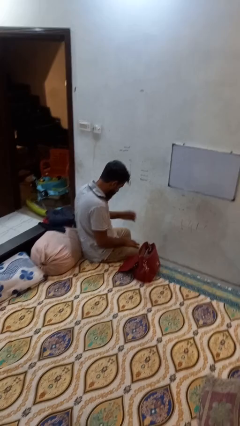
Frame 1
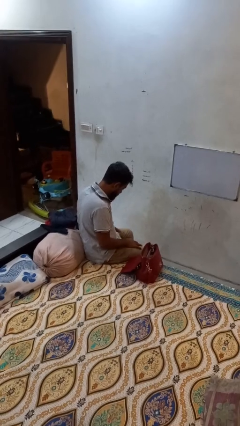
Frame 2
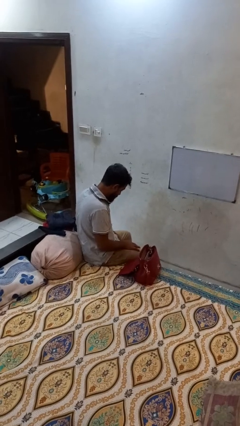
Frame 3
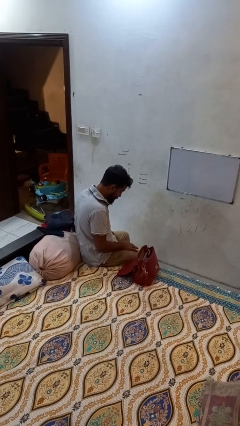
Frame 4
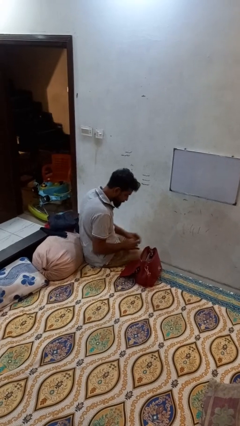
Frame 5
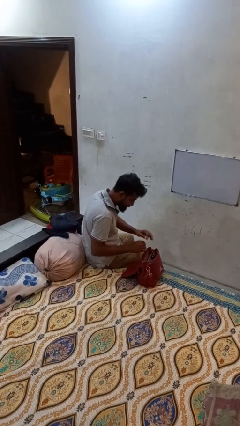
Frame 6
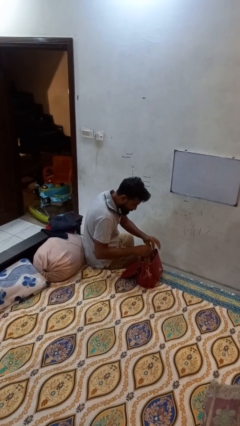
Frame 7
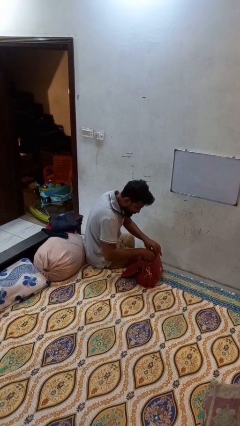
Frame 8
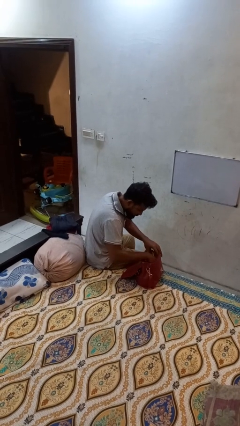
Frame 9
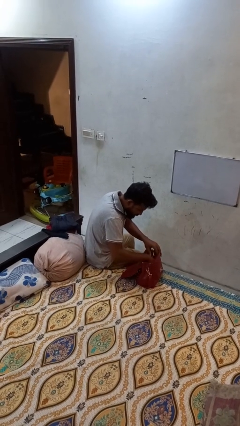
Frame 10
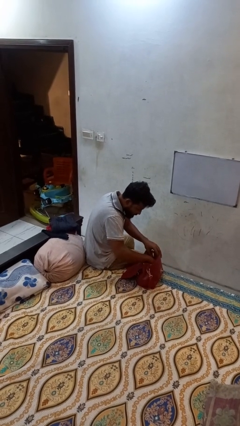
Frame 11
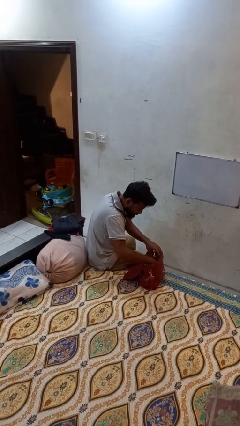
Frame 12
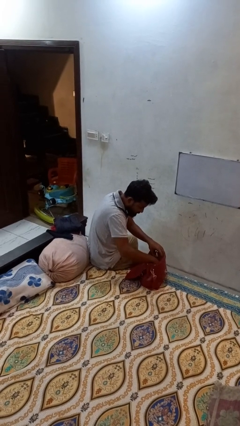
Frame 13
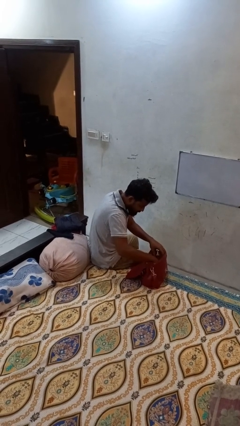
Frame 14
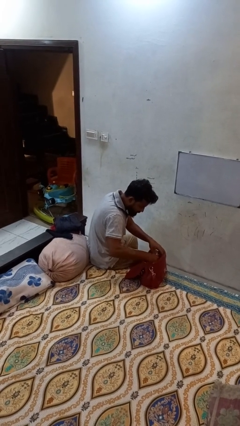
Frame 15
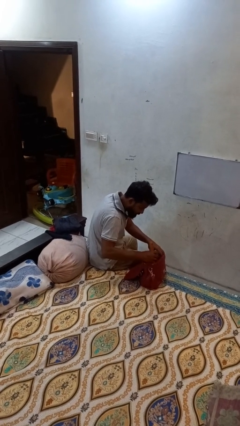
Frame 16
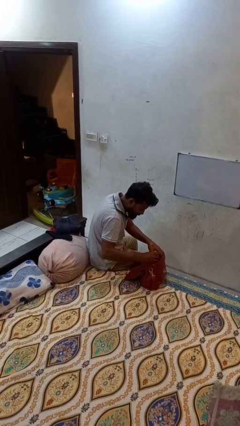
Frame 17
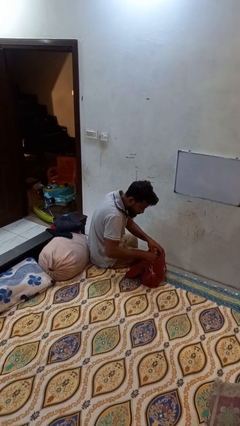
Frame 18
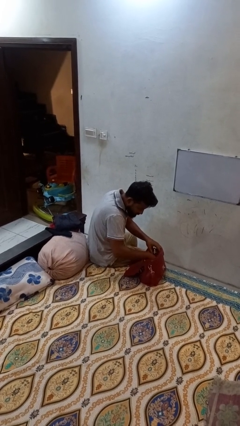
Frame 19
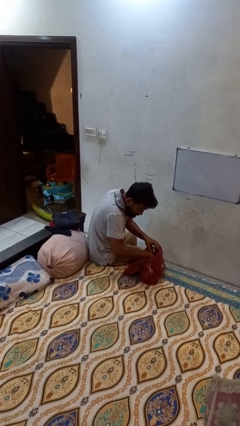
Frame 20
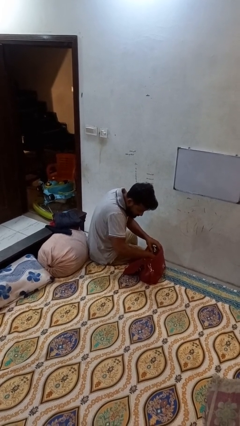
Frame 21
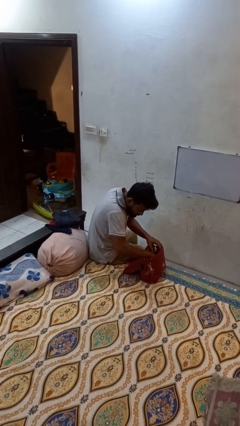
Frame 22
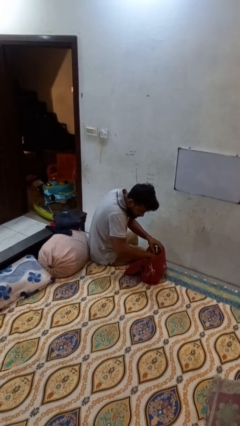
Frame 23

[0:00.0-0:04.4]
person searches in purse

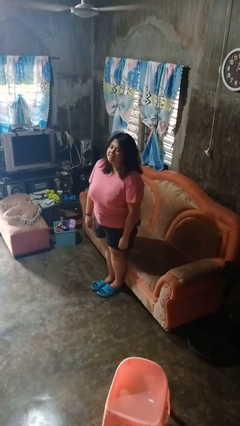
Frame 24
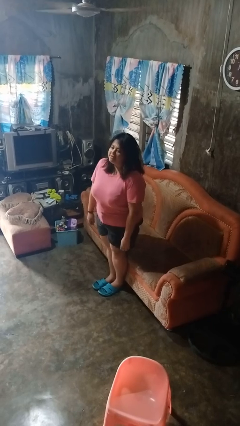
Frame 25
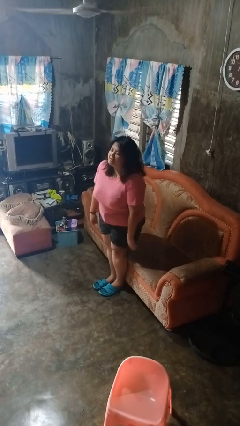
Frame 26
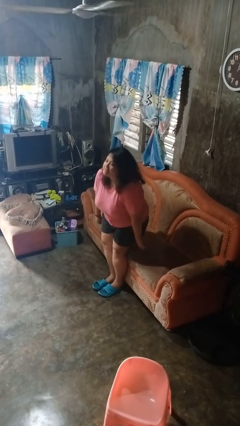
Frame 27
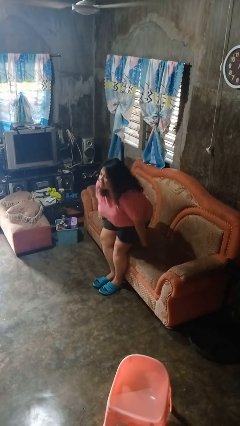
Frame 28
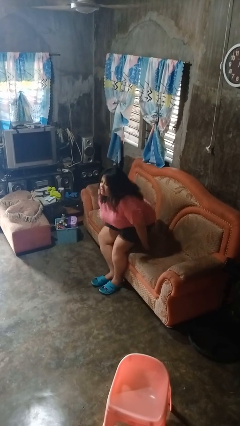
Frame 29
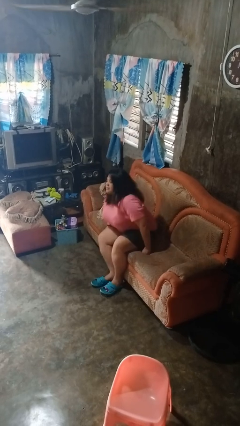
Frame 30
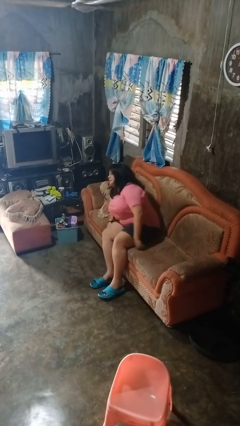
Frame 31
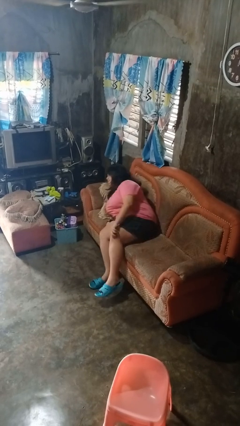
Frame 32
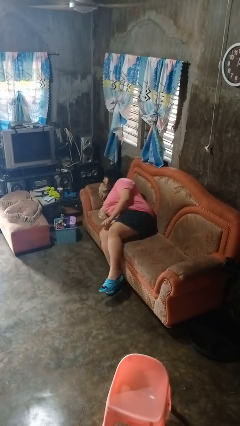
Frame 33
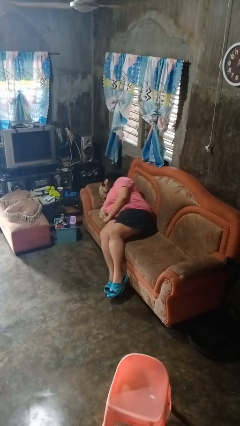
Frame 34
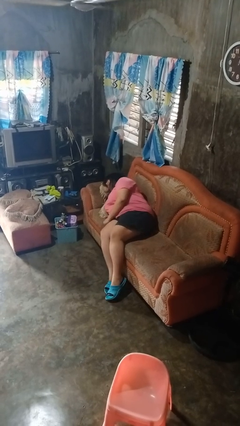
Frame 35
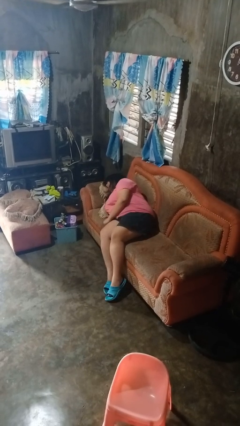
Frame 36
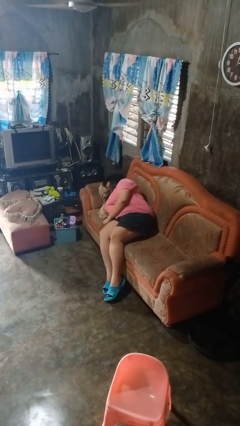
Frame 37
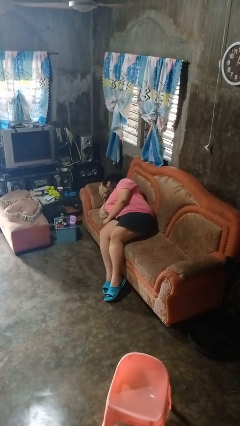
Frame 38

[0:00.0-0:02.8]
person lies down on couch

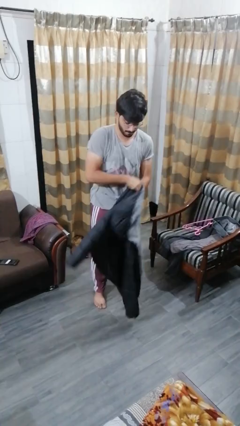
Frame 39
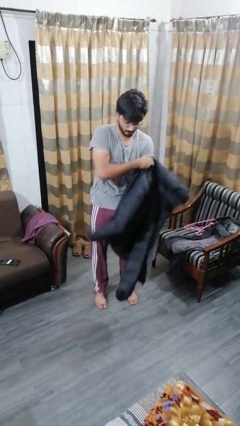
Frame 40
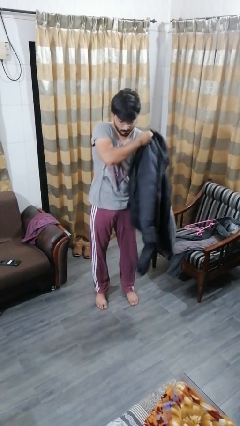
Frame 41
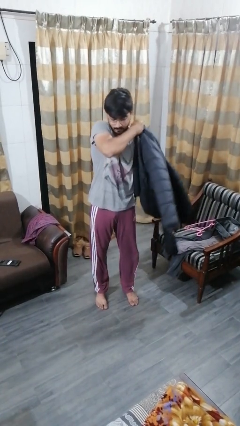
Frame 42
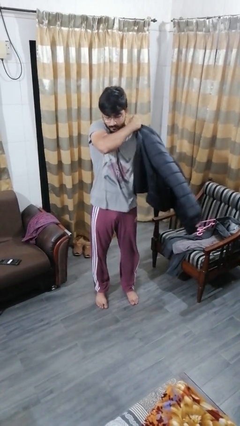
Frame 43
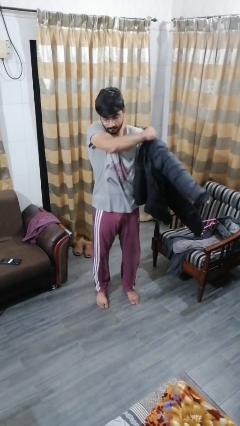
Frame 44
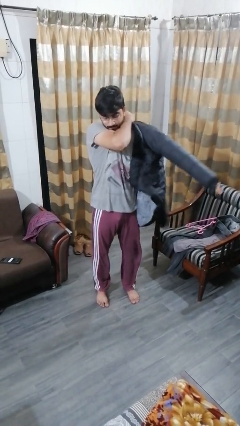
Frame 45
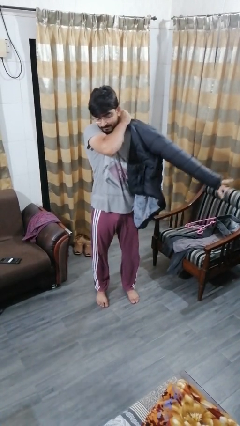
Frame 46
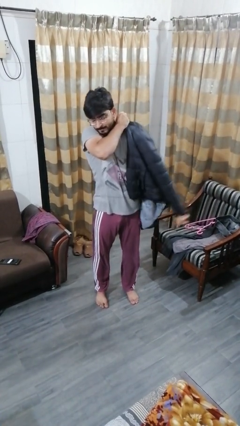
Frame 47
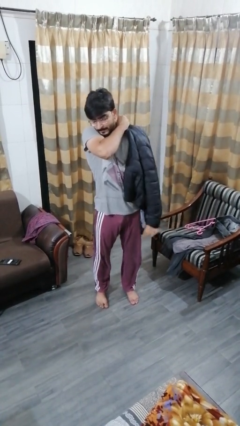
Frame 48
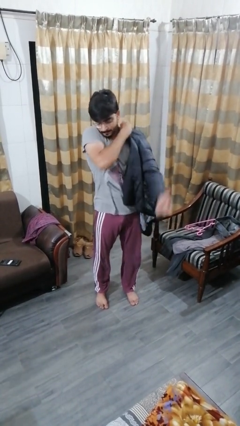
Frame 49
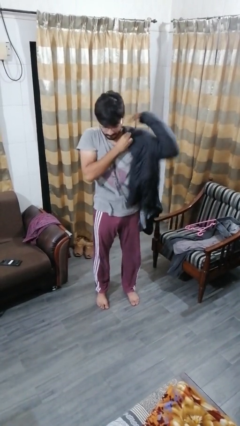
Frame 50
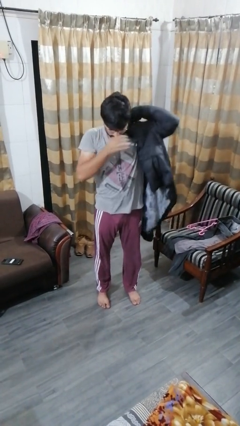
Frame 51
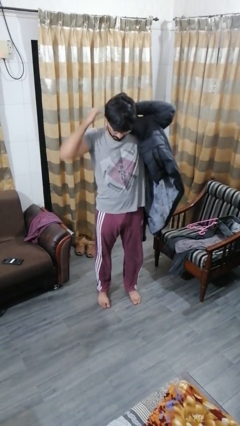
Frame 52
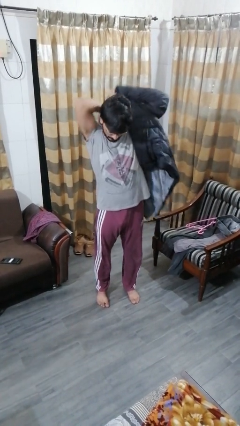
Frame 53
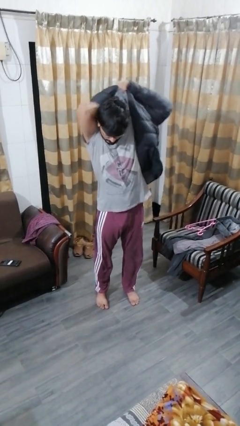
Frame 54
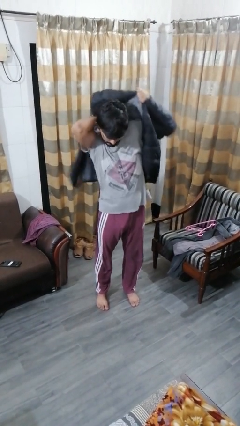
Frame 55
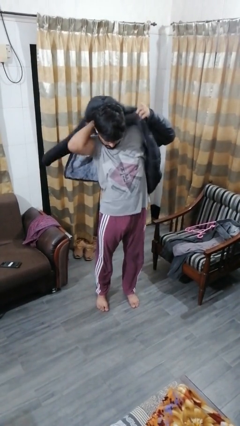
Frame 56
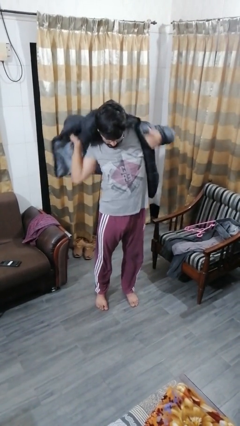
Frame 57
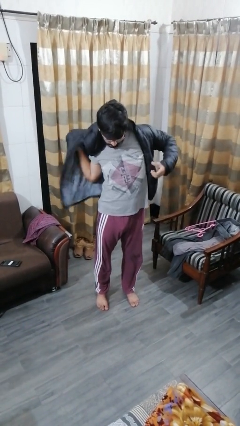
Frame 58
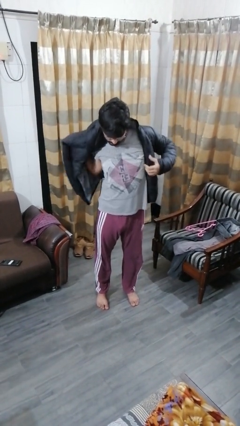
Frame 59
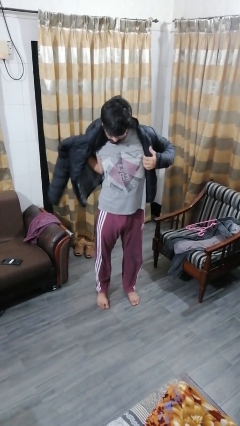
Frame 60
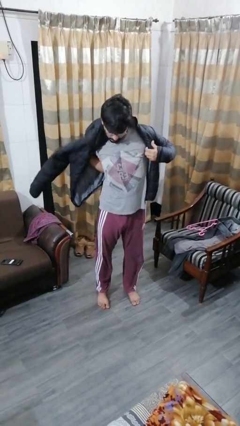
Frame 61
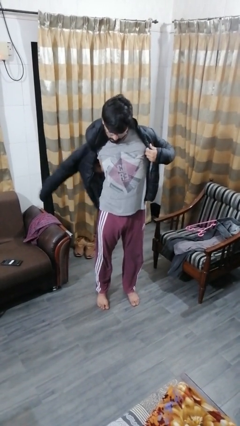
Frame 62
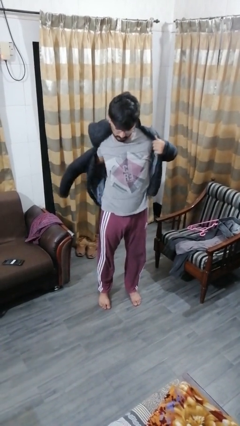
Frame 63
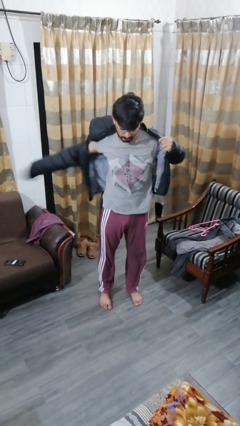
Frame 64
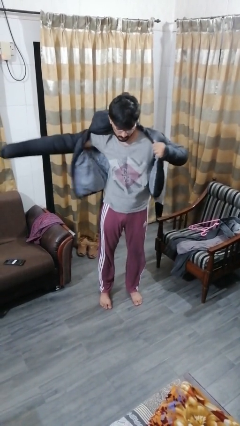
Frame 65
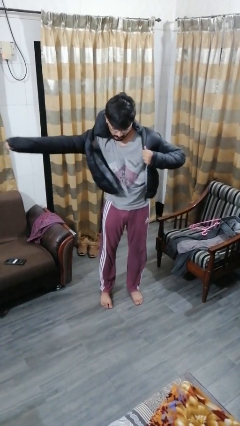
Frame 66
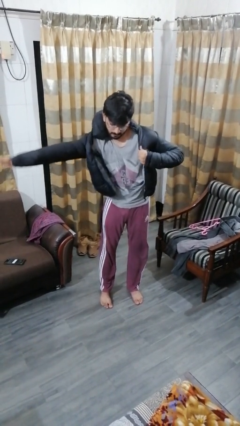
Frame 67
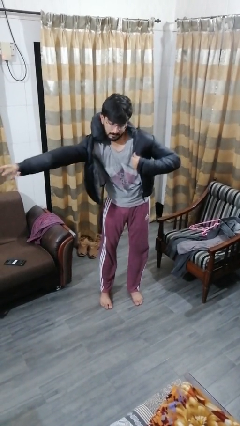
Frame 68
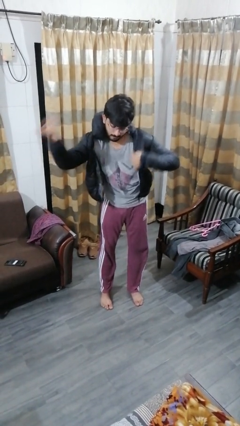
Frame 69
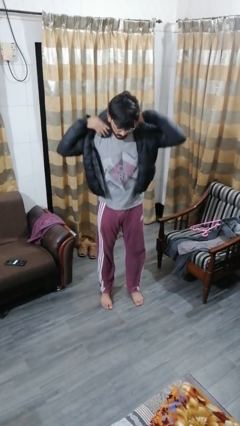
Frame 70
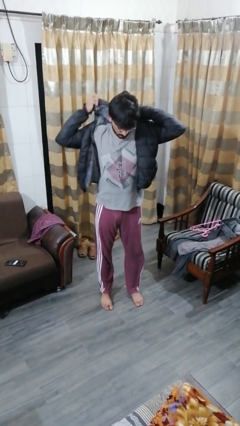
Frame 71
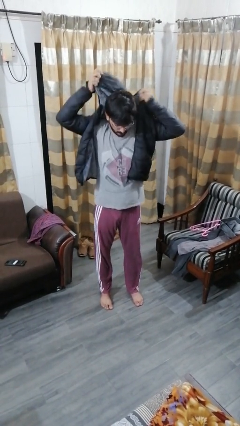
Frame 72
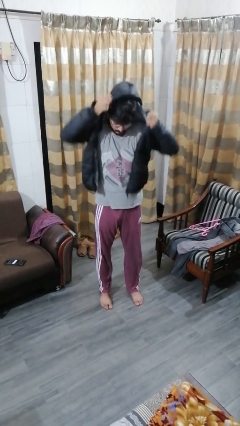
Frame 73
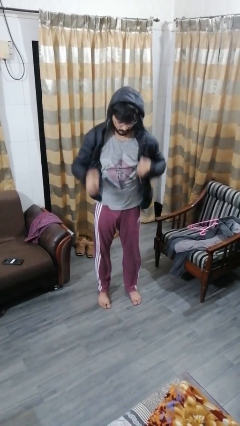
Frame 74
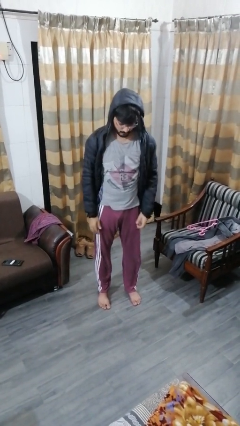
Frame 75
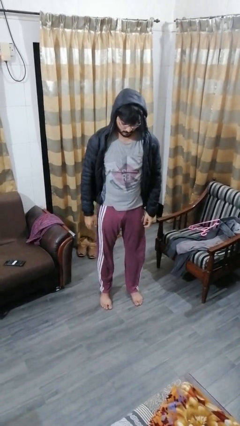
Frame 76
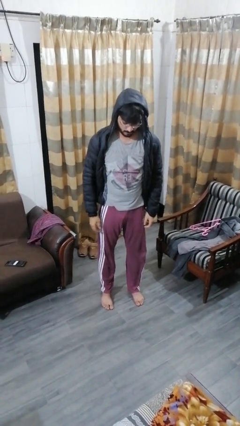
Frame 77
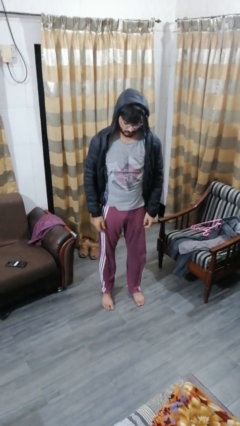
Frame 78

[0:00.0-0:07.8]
person puts on hoodie

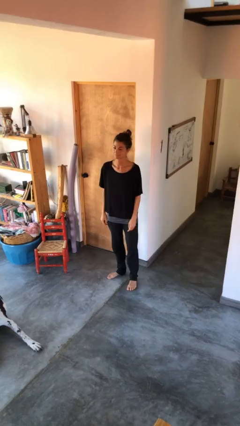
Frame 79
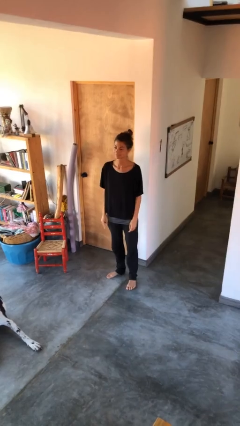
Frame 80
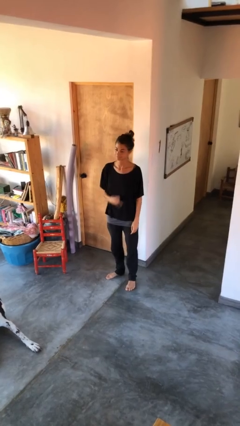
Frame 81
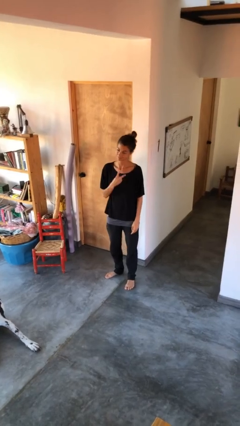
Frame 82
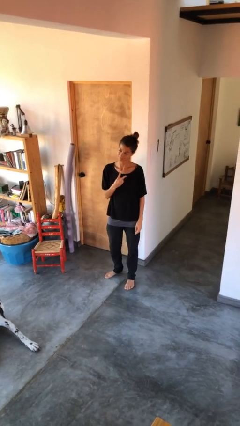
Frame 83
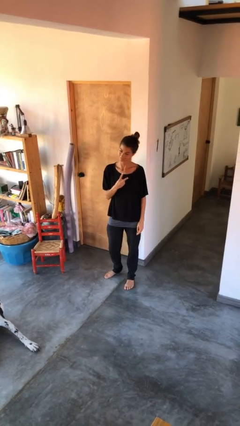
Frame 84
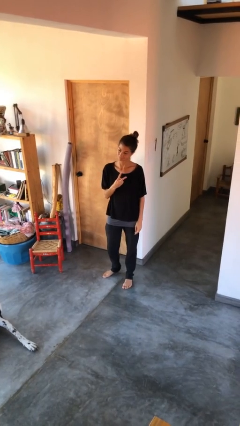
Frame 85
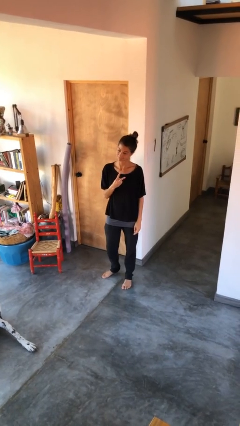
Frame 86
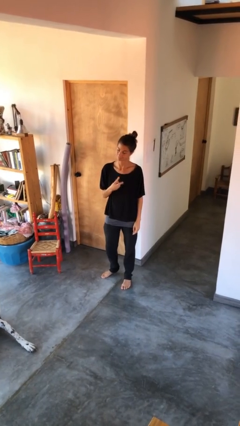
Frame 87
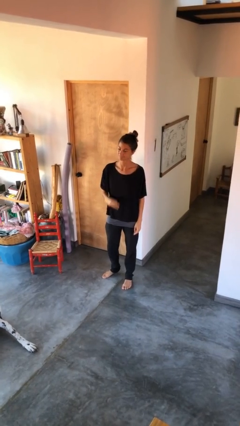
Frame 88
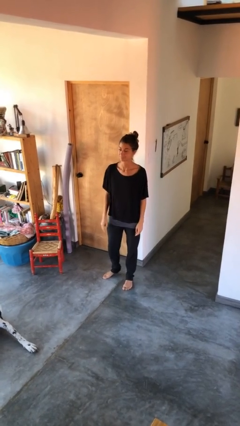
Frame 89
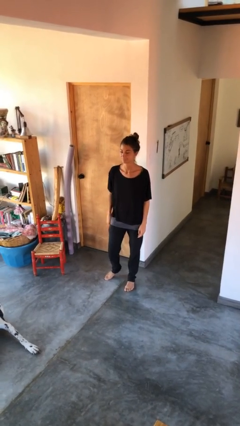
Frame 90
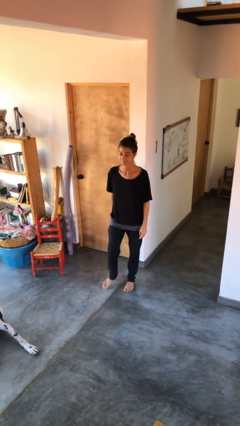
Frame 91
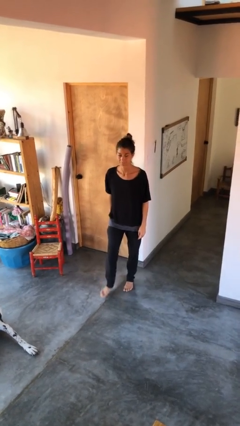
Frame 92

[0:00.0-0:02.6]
person gestures peace
